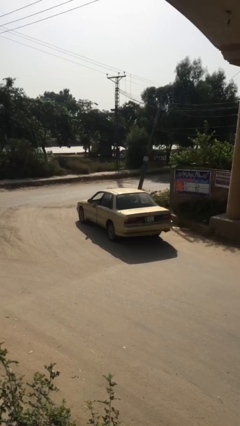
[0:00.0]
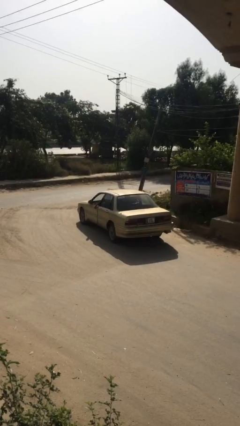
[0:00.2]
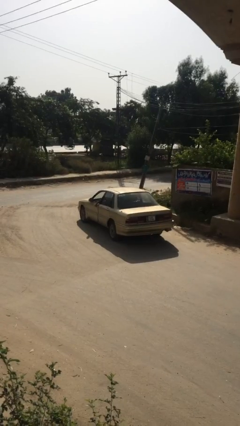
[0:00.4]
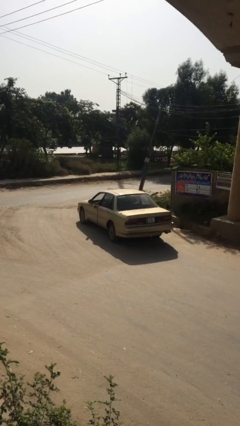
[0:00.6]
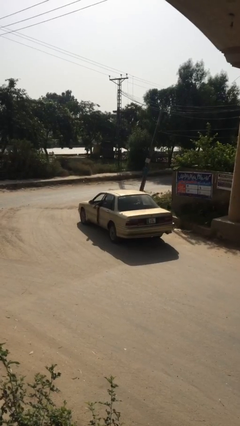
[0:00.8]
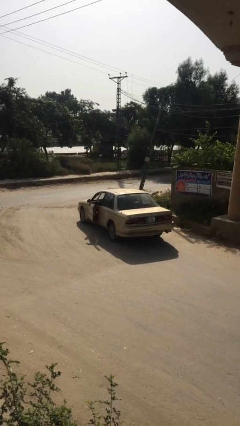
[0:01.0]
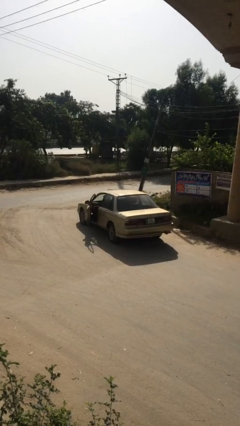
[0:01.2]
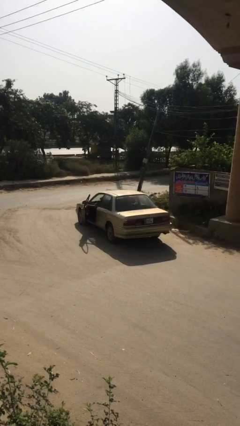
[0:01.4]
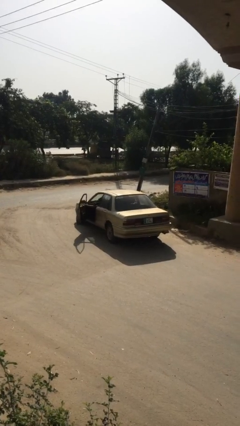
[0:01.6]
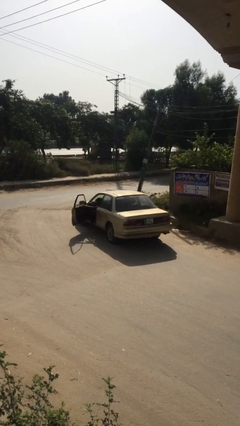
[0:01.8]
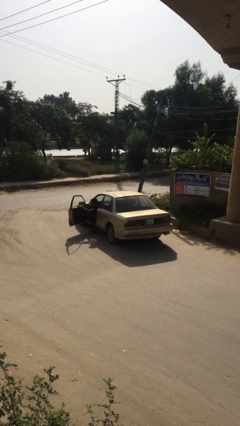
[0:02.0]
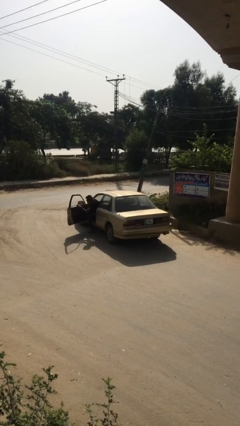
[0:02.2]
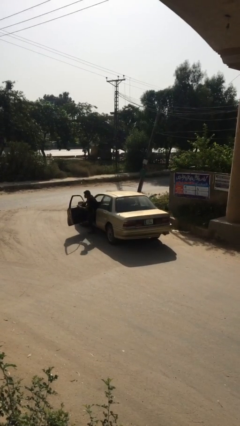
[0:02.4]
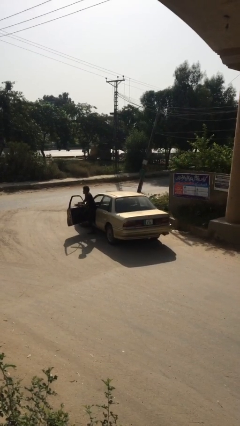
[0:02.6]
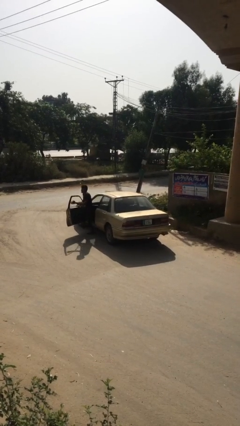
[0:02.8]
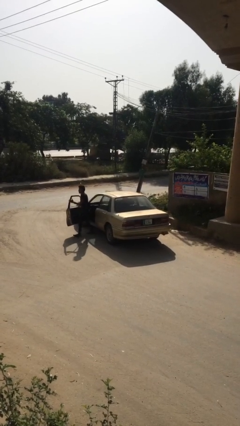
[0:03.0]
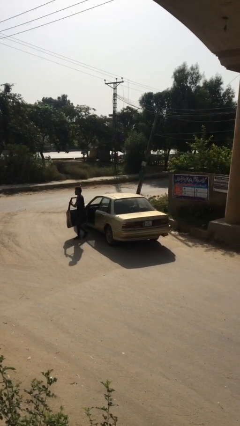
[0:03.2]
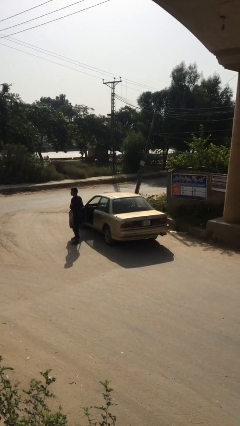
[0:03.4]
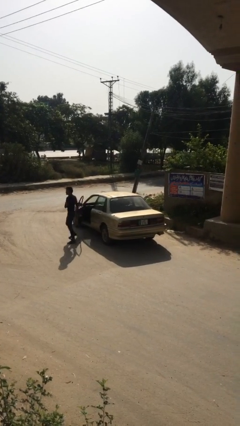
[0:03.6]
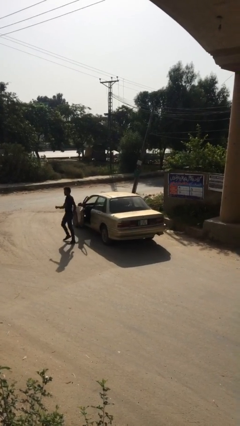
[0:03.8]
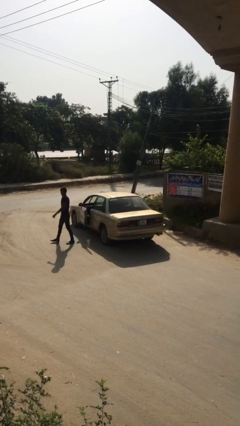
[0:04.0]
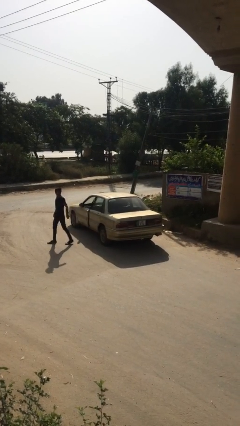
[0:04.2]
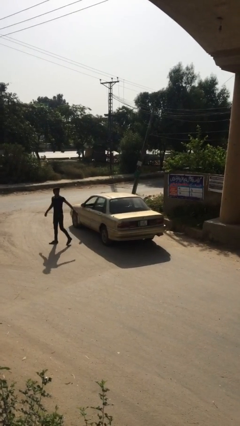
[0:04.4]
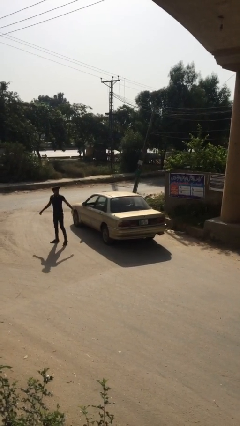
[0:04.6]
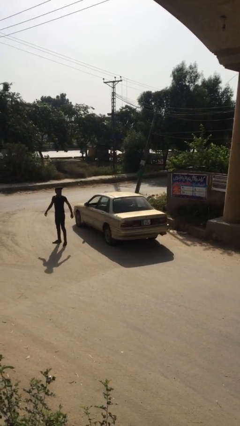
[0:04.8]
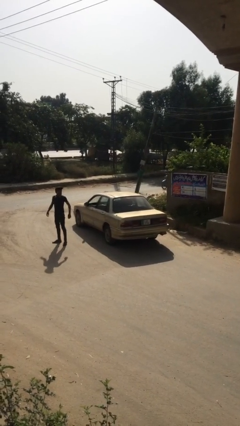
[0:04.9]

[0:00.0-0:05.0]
car drops off person

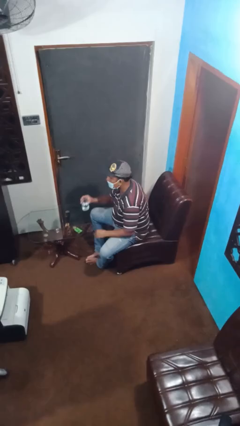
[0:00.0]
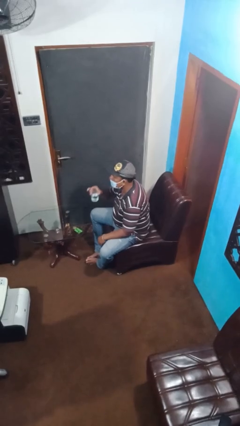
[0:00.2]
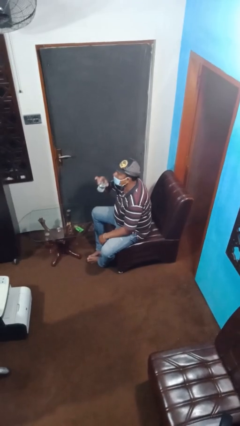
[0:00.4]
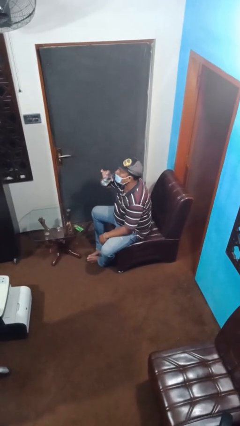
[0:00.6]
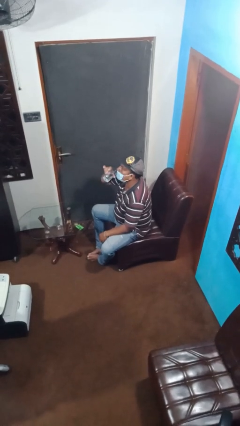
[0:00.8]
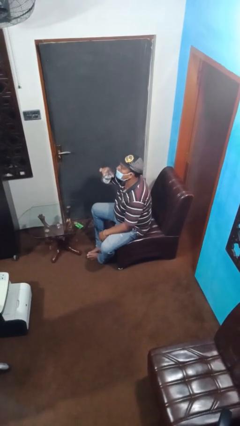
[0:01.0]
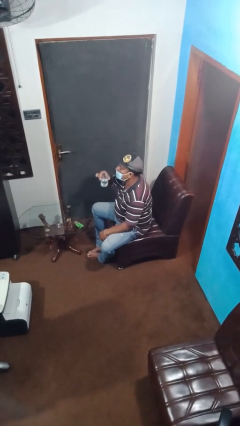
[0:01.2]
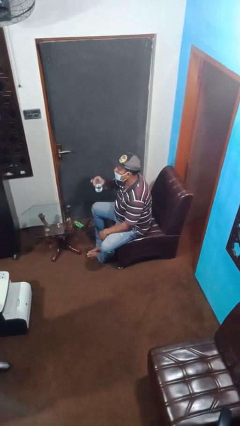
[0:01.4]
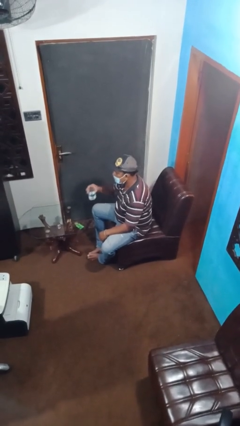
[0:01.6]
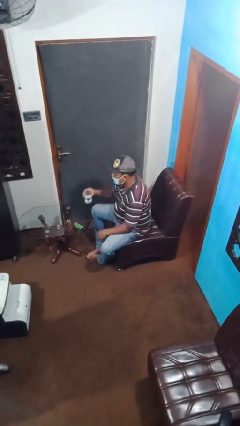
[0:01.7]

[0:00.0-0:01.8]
person drinks from cup

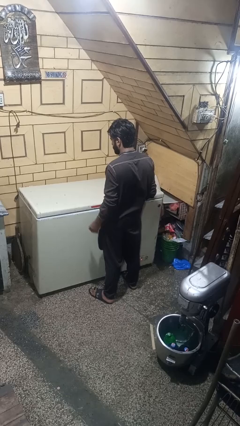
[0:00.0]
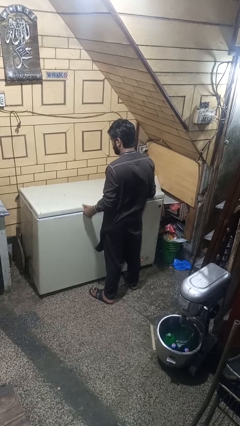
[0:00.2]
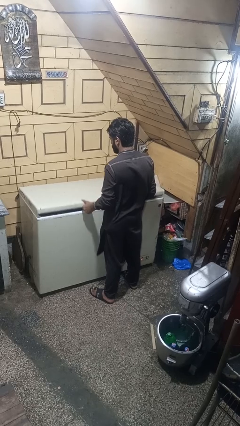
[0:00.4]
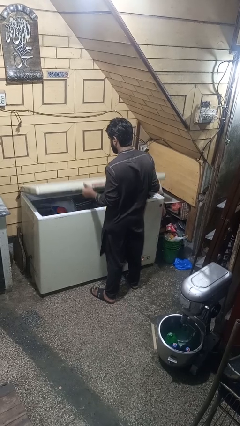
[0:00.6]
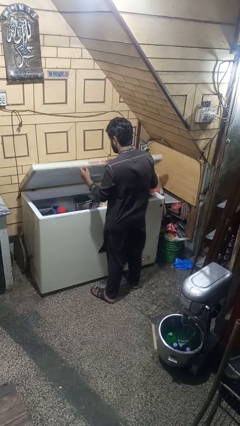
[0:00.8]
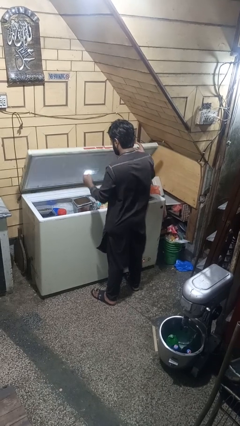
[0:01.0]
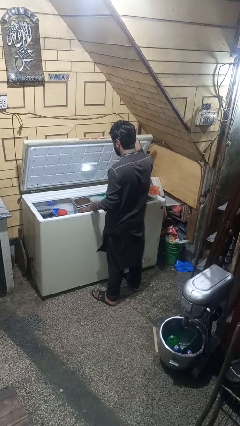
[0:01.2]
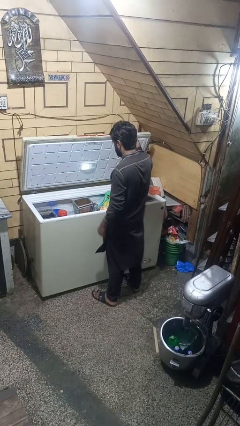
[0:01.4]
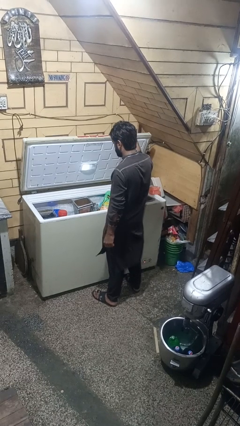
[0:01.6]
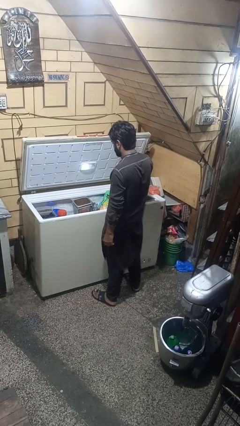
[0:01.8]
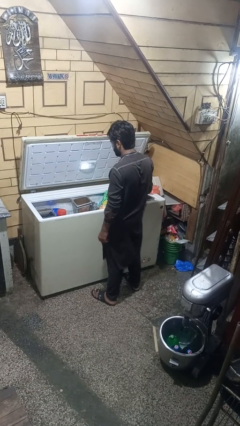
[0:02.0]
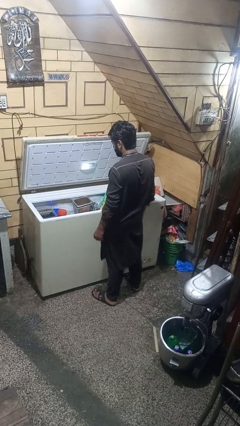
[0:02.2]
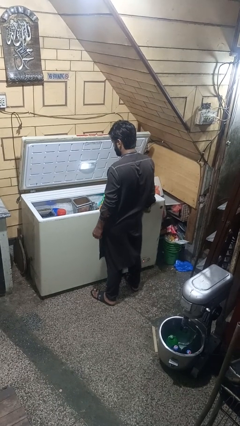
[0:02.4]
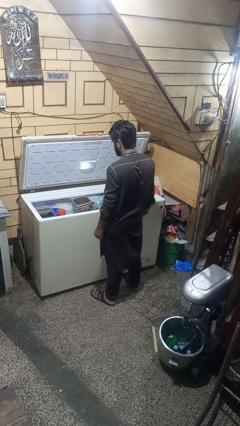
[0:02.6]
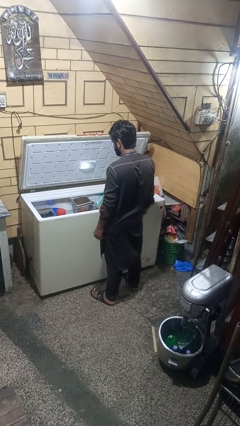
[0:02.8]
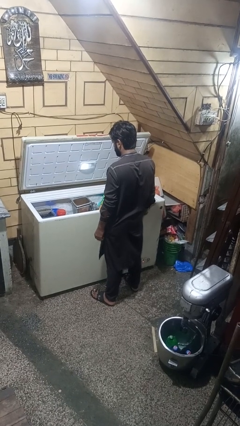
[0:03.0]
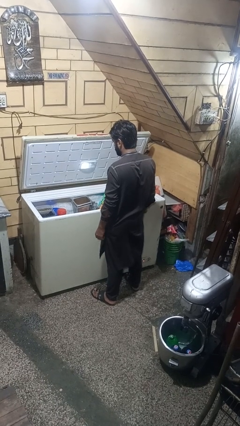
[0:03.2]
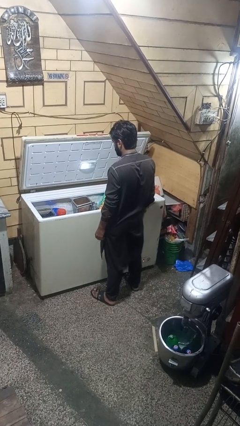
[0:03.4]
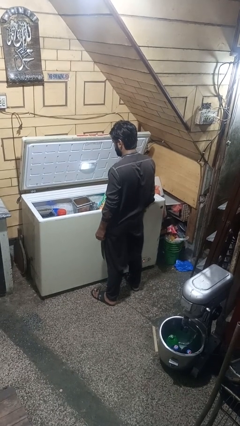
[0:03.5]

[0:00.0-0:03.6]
person opens refrigerator

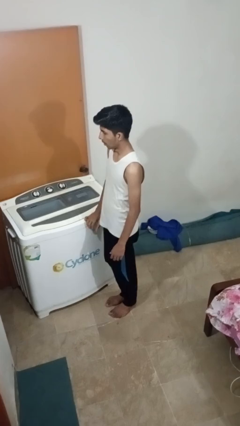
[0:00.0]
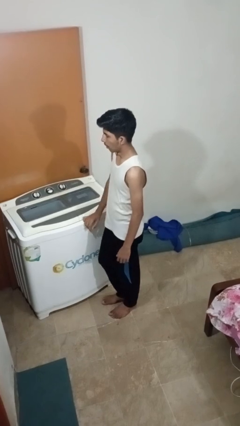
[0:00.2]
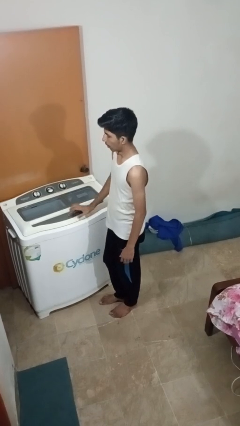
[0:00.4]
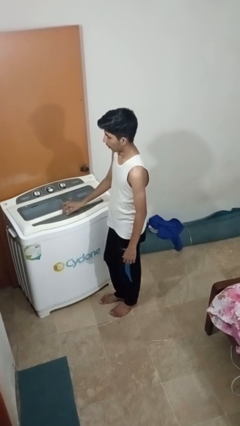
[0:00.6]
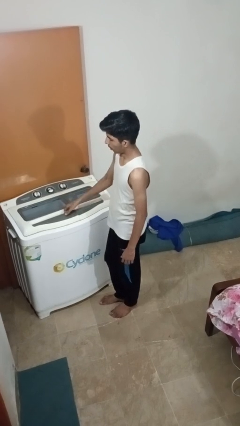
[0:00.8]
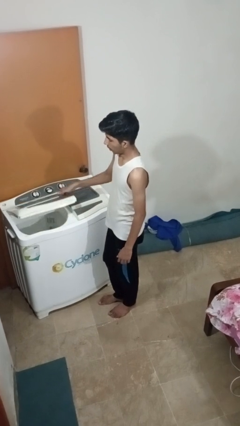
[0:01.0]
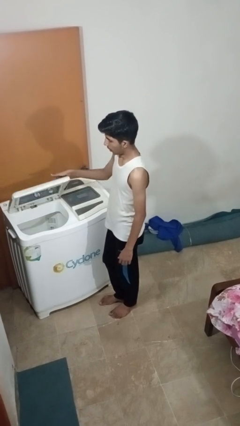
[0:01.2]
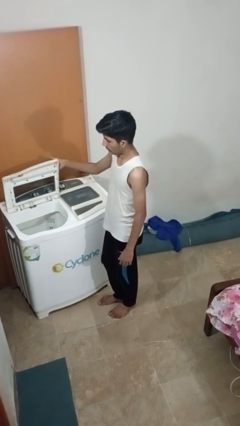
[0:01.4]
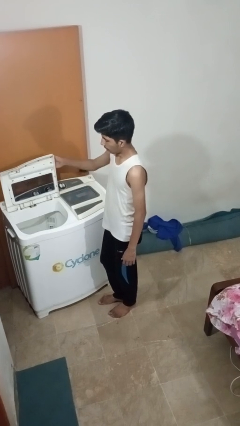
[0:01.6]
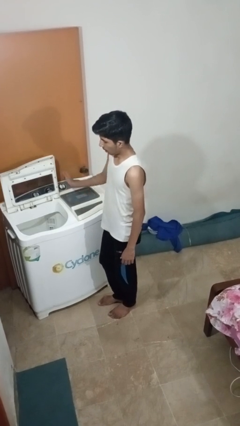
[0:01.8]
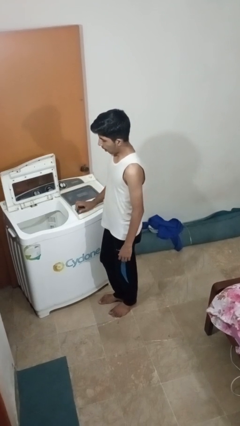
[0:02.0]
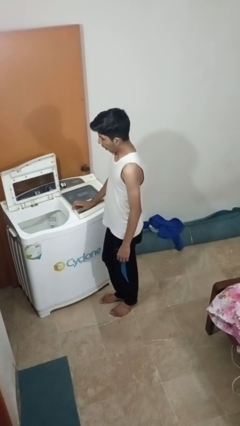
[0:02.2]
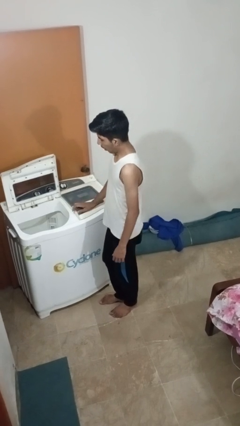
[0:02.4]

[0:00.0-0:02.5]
person opens clothes washer

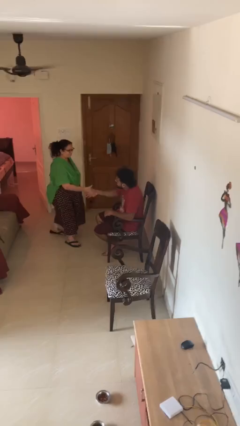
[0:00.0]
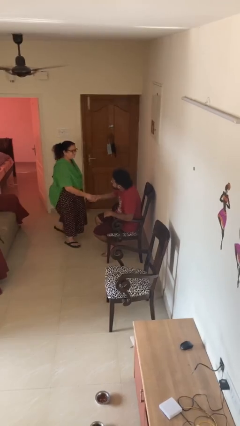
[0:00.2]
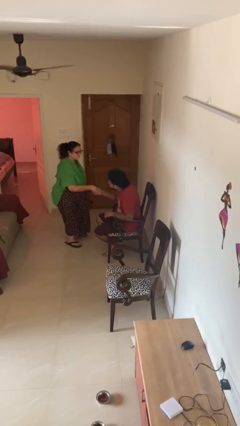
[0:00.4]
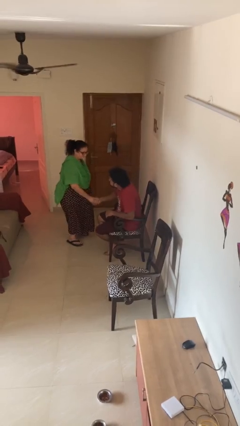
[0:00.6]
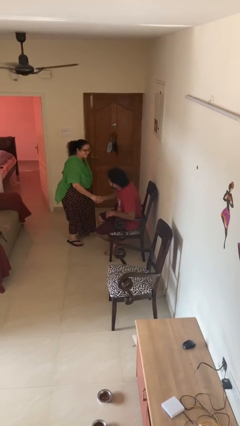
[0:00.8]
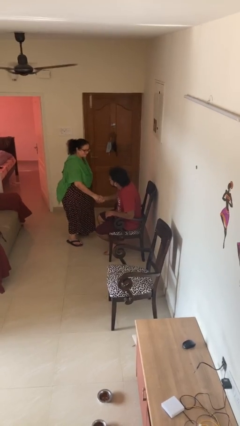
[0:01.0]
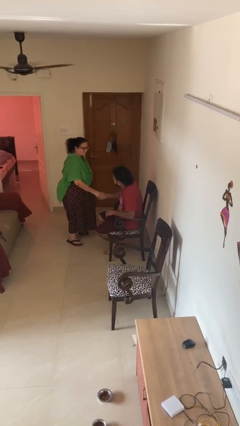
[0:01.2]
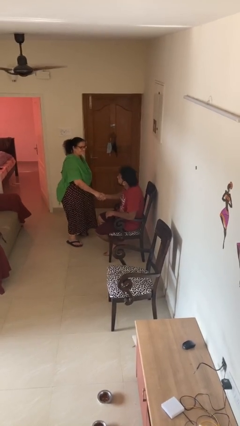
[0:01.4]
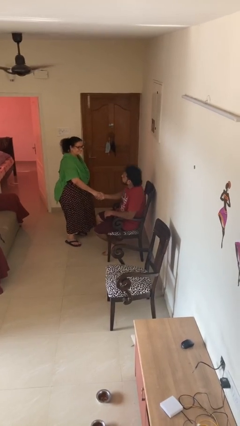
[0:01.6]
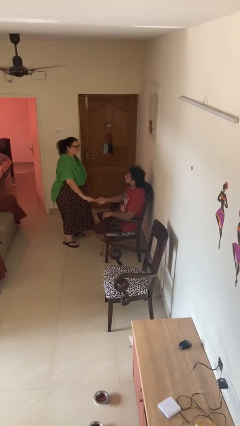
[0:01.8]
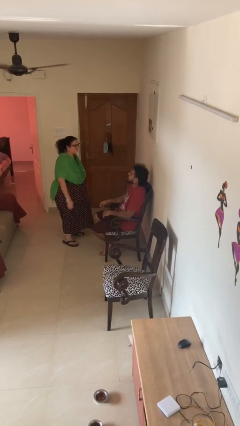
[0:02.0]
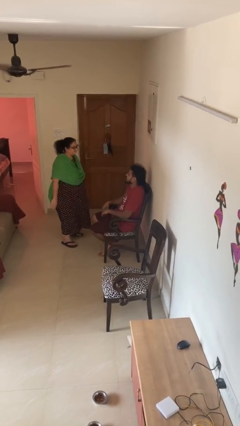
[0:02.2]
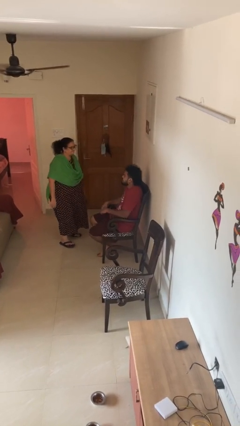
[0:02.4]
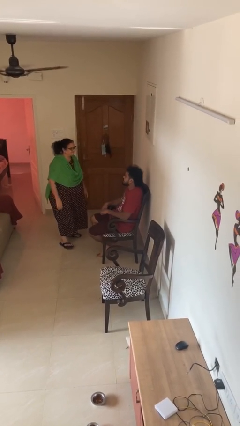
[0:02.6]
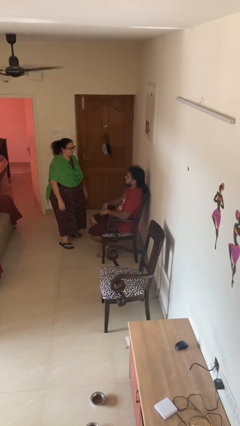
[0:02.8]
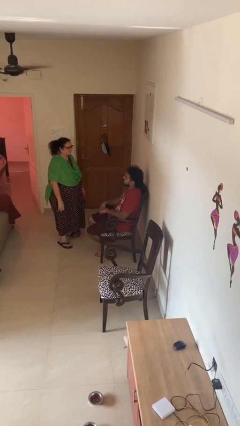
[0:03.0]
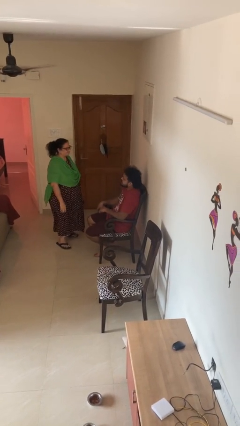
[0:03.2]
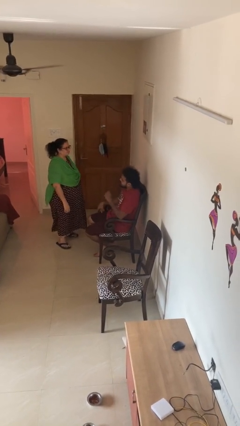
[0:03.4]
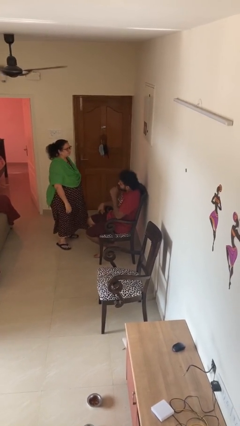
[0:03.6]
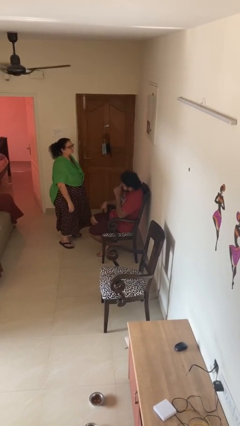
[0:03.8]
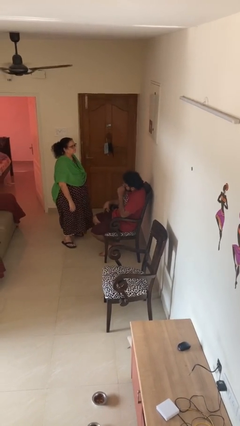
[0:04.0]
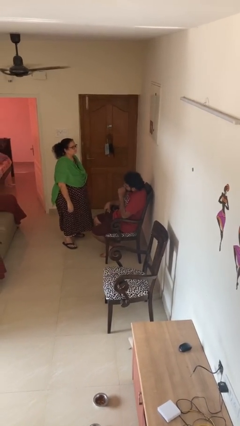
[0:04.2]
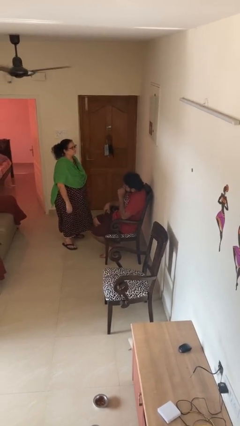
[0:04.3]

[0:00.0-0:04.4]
person shakes hand
